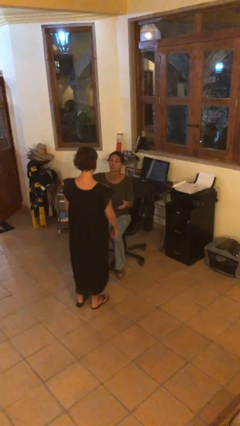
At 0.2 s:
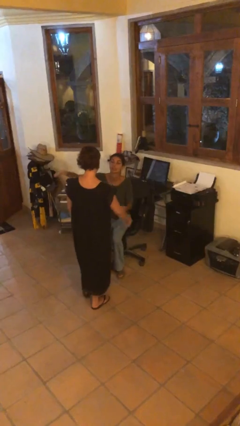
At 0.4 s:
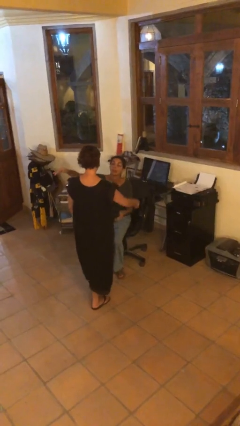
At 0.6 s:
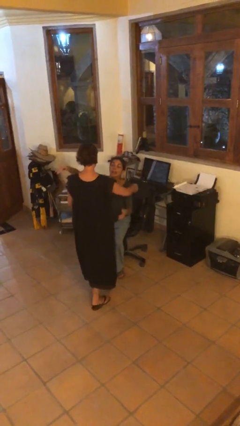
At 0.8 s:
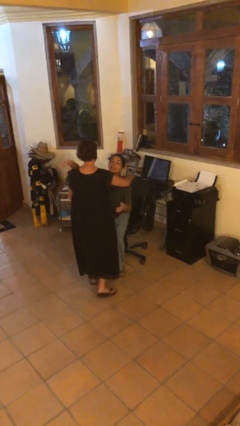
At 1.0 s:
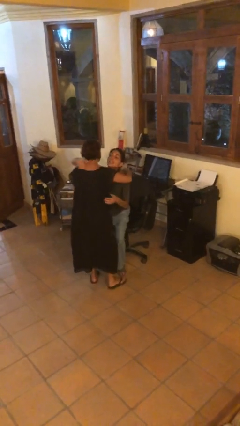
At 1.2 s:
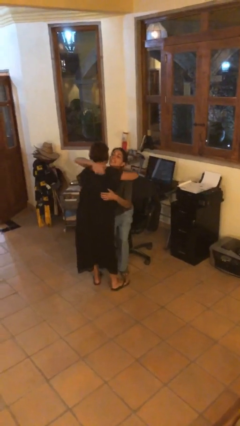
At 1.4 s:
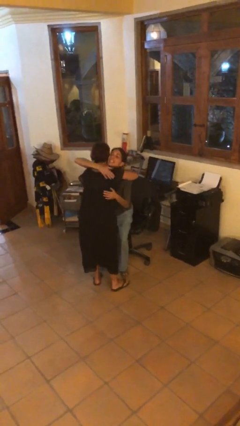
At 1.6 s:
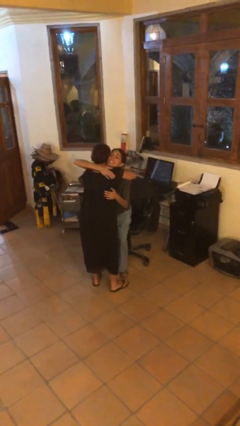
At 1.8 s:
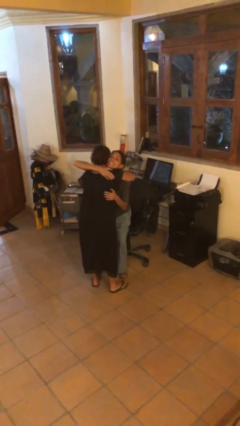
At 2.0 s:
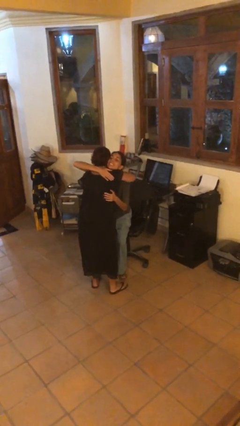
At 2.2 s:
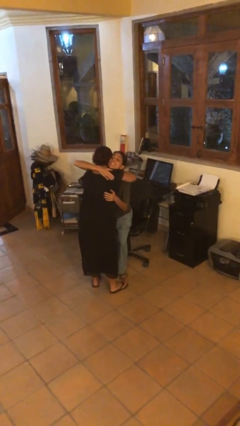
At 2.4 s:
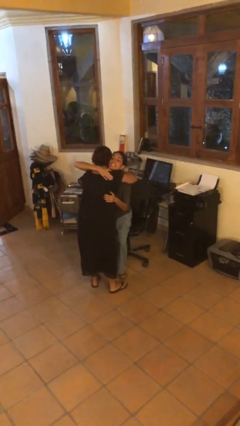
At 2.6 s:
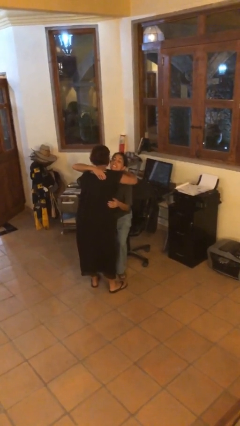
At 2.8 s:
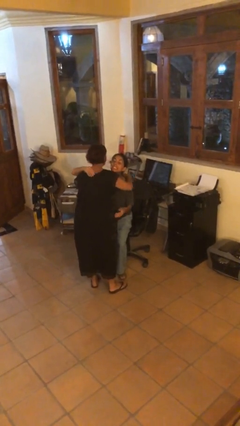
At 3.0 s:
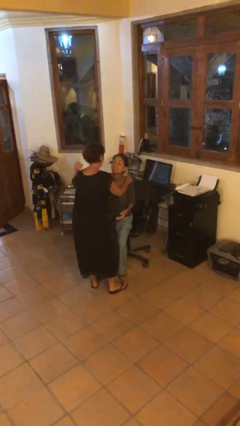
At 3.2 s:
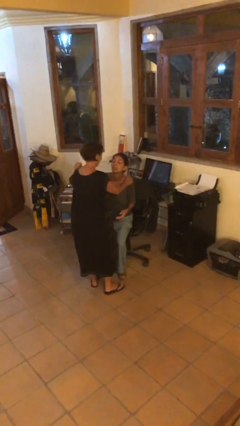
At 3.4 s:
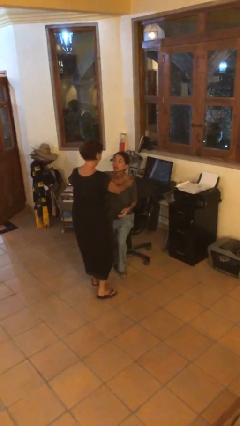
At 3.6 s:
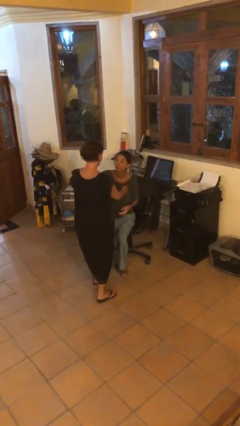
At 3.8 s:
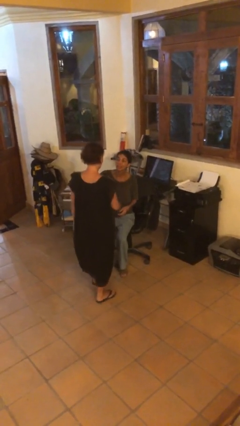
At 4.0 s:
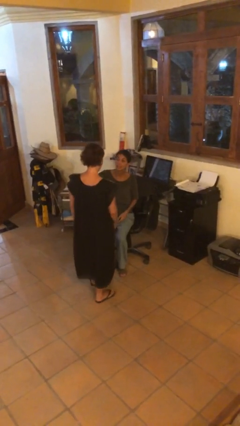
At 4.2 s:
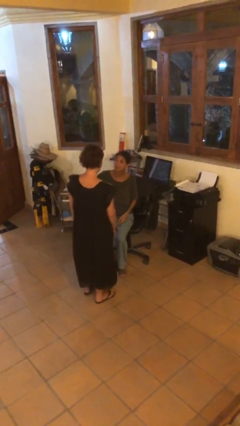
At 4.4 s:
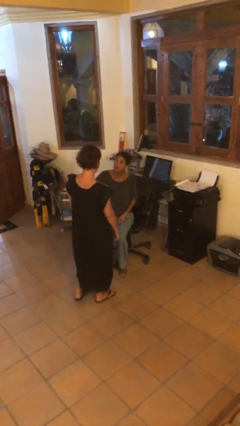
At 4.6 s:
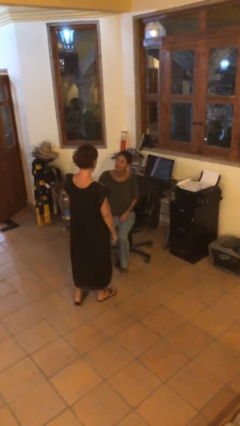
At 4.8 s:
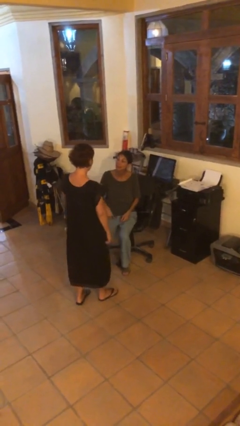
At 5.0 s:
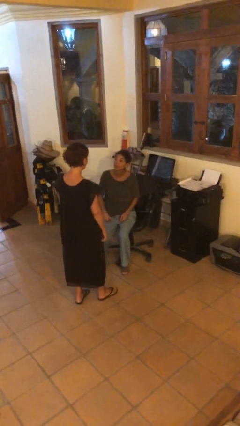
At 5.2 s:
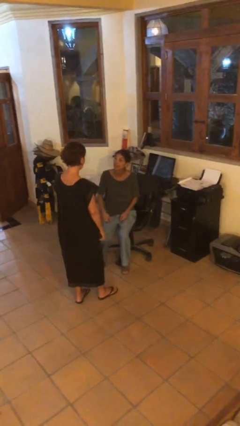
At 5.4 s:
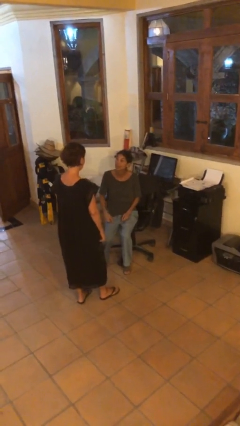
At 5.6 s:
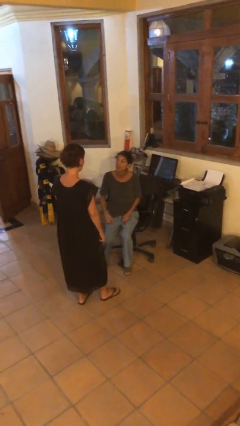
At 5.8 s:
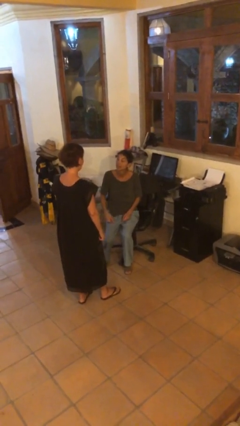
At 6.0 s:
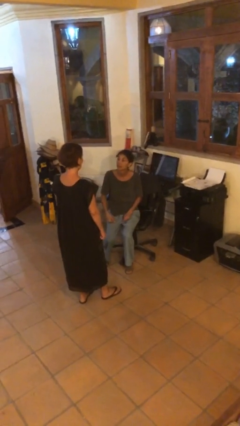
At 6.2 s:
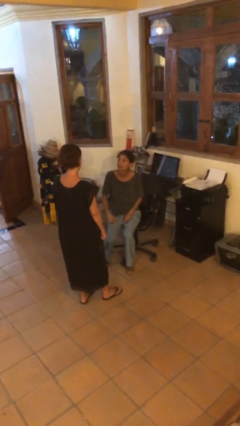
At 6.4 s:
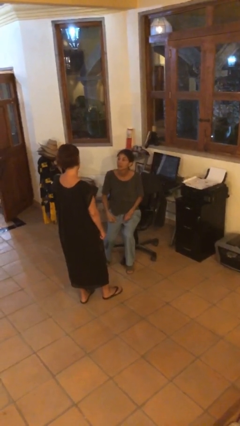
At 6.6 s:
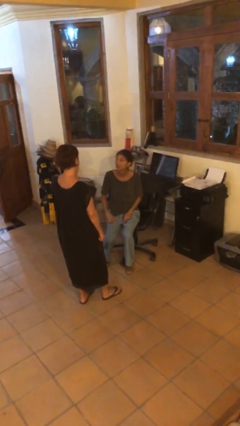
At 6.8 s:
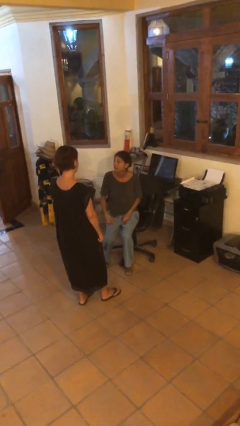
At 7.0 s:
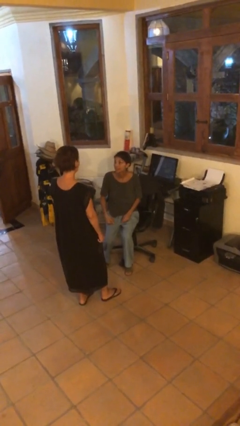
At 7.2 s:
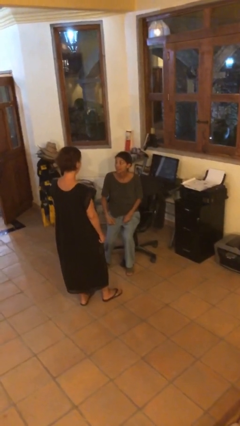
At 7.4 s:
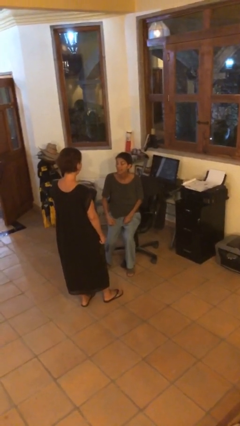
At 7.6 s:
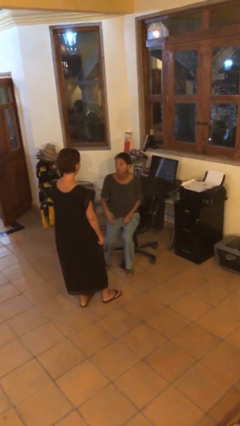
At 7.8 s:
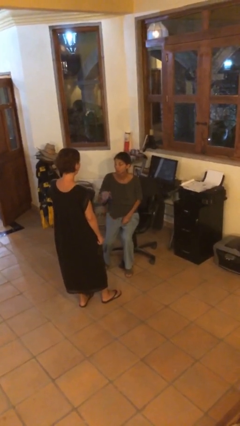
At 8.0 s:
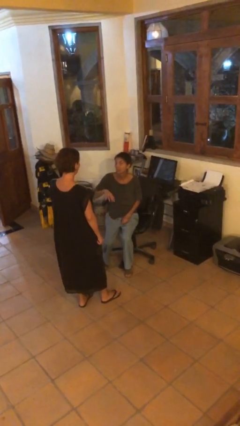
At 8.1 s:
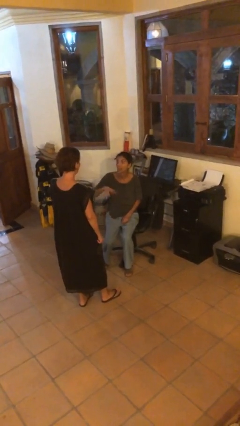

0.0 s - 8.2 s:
person embraces person

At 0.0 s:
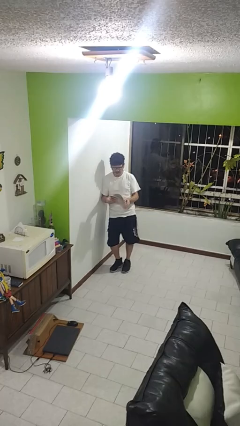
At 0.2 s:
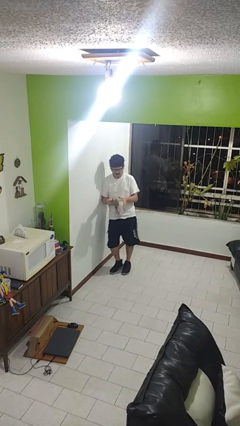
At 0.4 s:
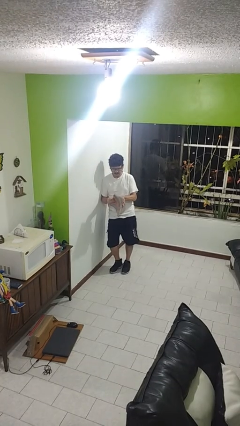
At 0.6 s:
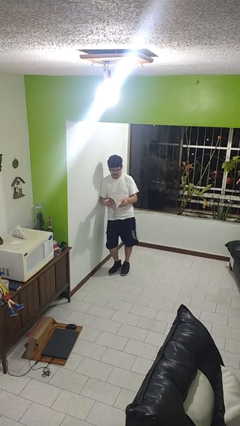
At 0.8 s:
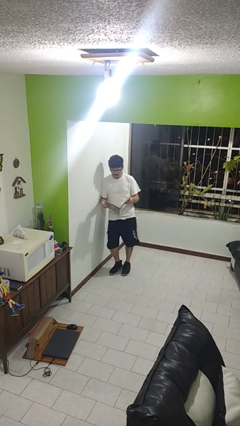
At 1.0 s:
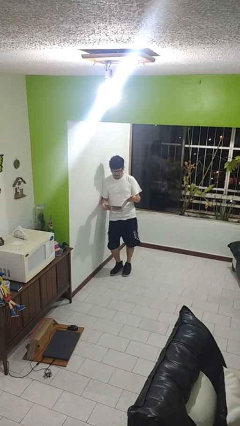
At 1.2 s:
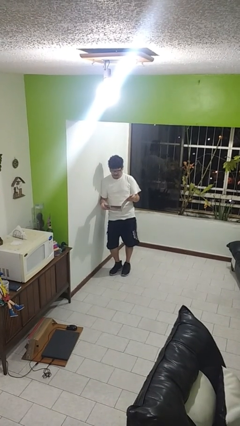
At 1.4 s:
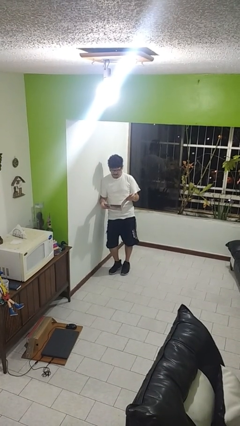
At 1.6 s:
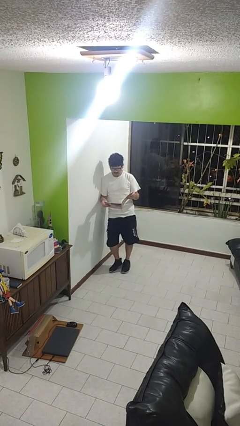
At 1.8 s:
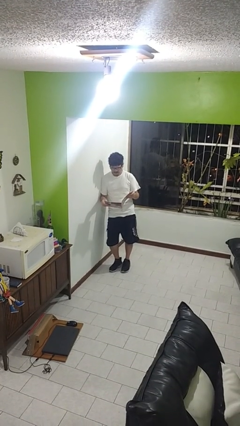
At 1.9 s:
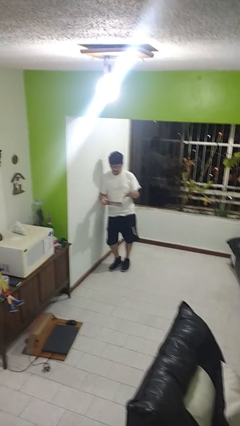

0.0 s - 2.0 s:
person reads magazine

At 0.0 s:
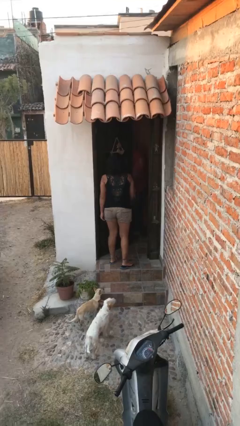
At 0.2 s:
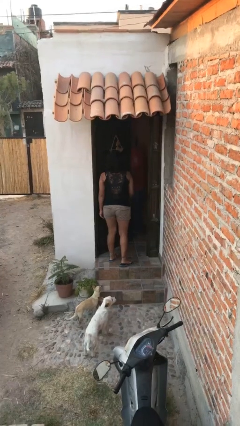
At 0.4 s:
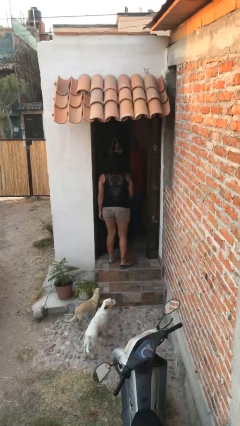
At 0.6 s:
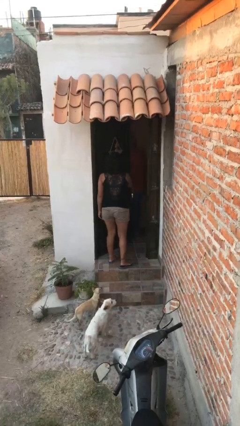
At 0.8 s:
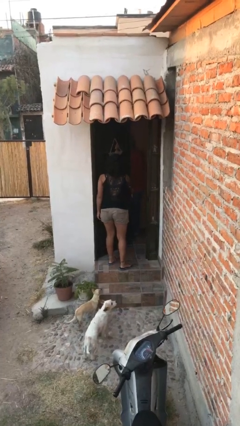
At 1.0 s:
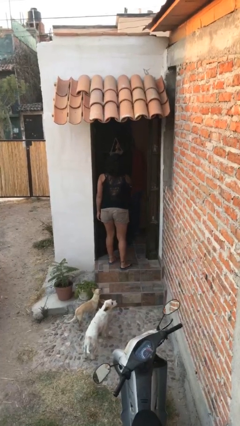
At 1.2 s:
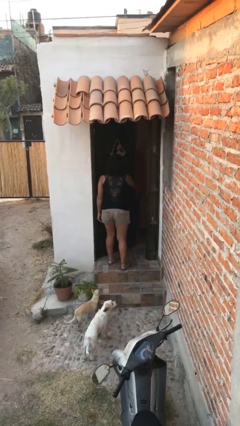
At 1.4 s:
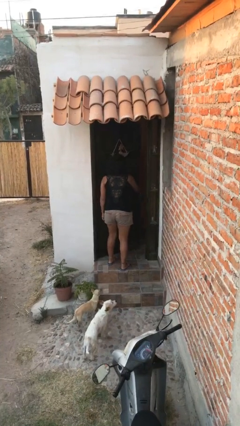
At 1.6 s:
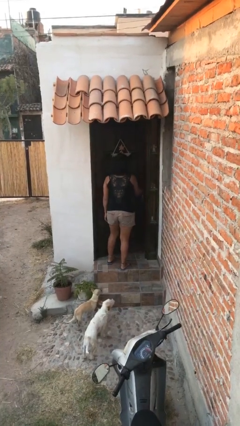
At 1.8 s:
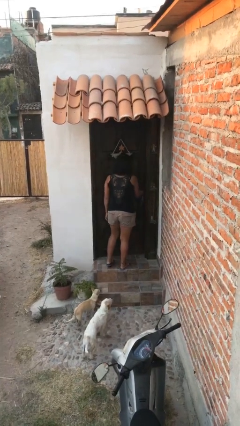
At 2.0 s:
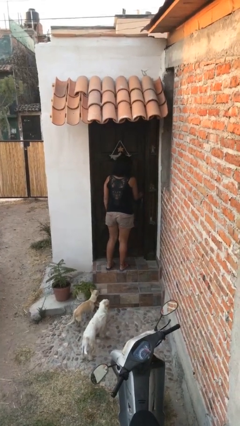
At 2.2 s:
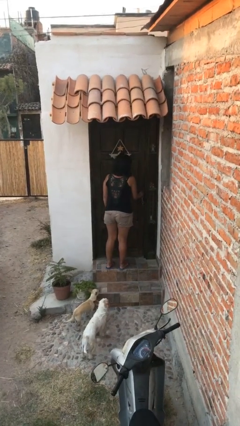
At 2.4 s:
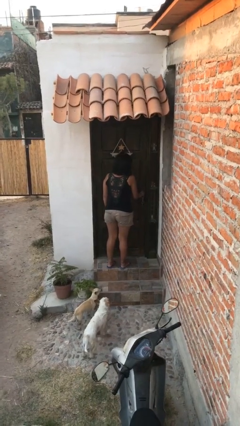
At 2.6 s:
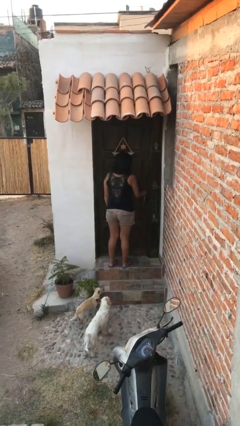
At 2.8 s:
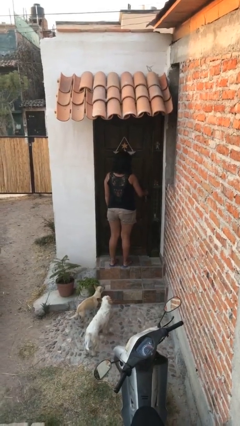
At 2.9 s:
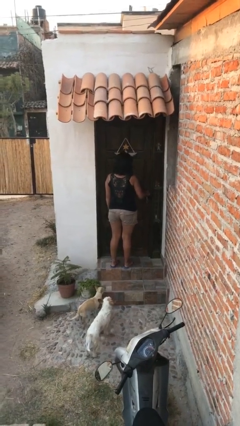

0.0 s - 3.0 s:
person closes facility door

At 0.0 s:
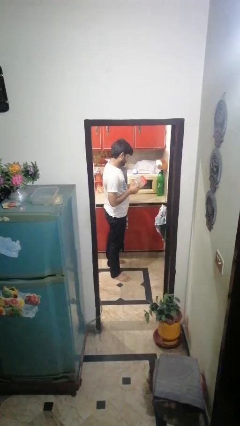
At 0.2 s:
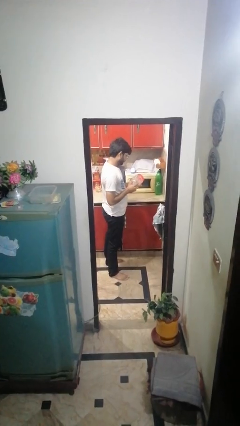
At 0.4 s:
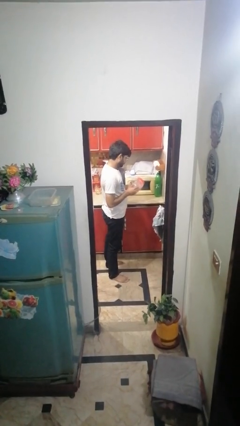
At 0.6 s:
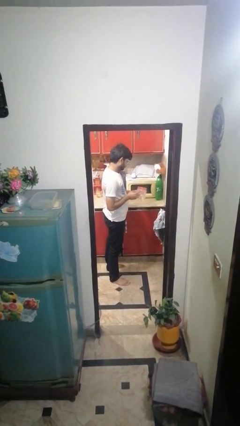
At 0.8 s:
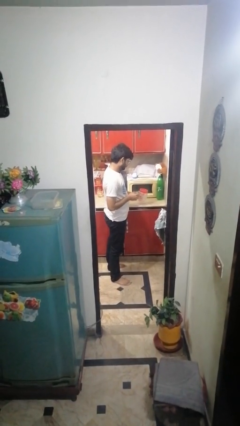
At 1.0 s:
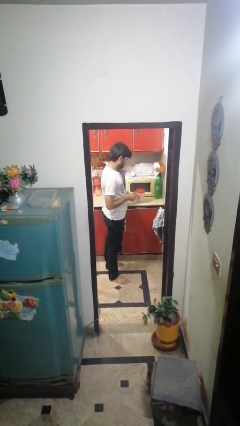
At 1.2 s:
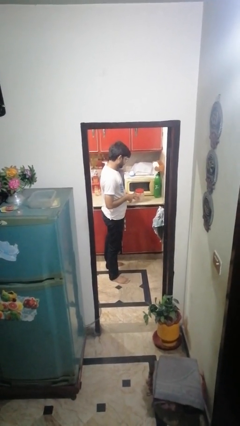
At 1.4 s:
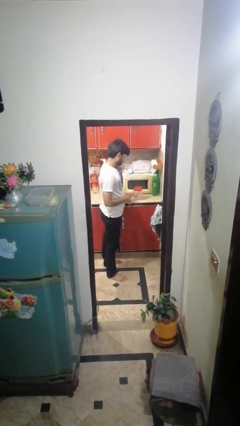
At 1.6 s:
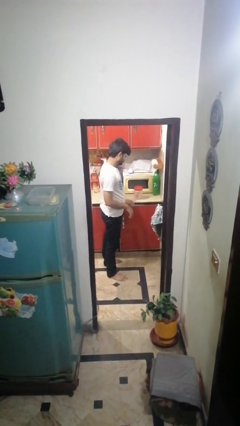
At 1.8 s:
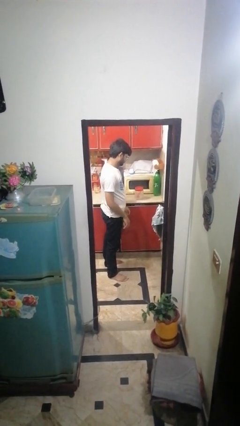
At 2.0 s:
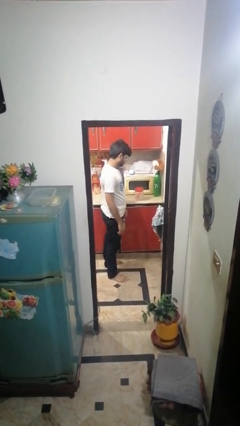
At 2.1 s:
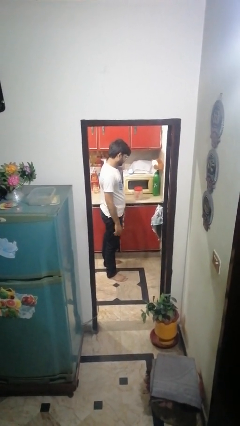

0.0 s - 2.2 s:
person puts down object on countertop

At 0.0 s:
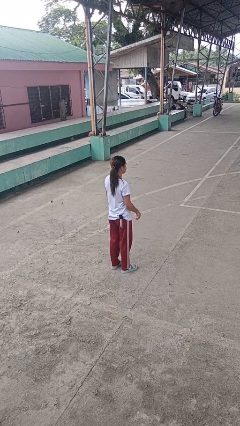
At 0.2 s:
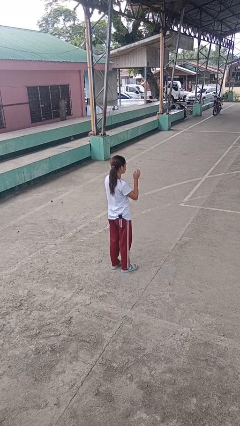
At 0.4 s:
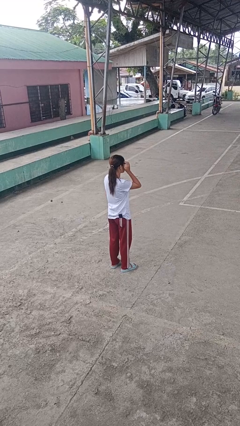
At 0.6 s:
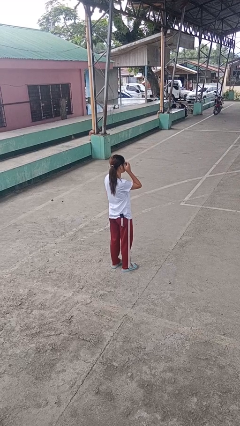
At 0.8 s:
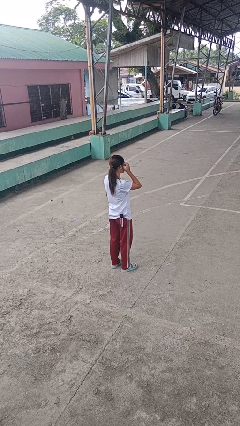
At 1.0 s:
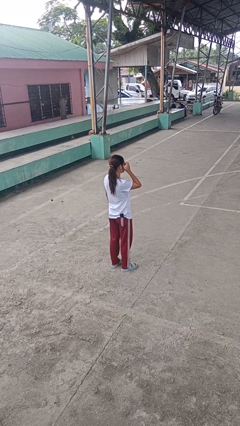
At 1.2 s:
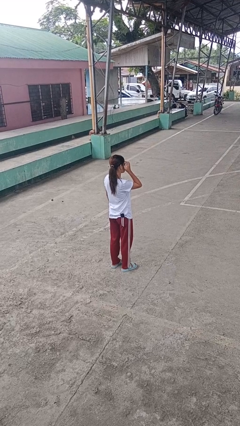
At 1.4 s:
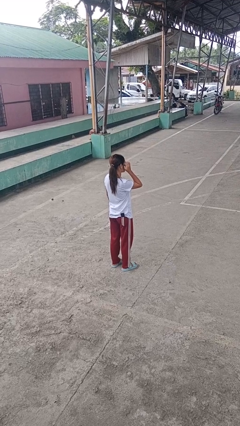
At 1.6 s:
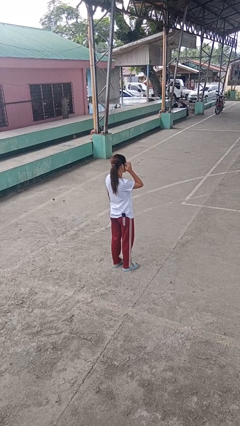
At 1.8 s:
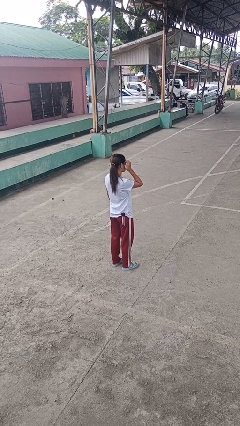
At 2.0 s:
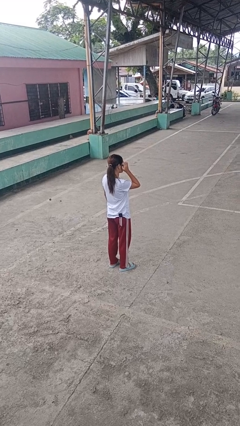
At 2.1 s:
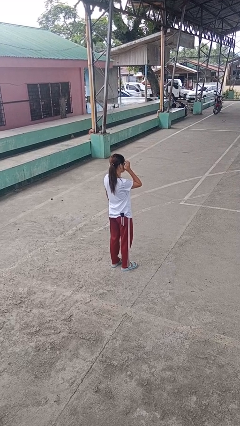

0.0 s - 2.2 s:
person scratches face
